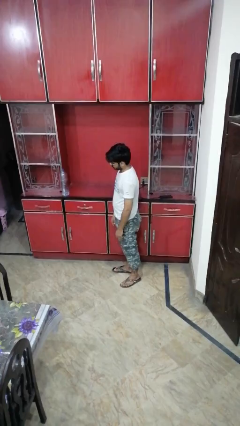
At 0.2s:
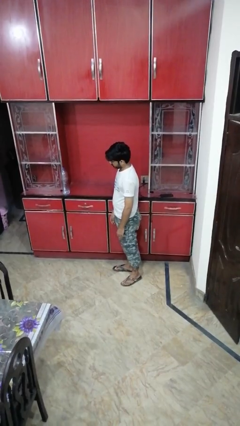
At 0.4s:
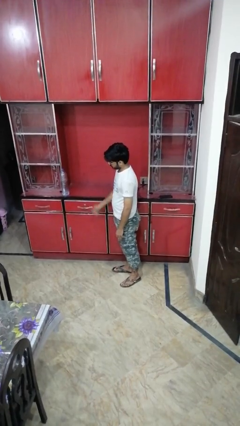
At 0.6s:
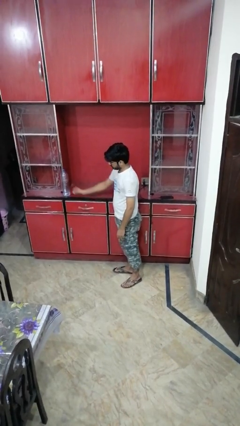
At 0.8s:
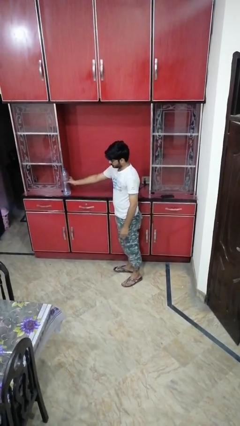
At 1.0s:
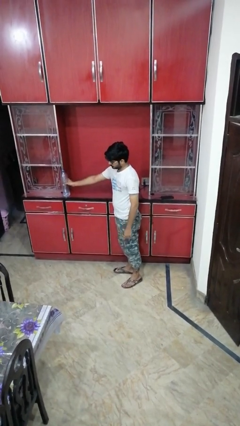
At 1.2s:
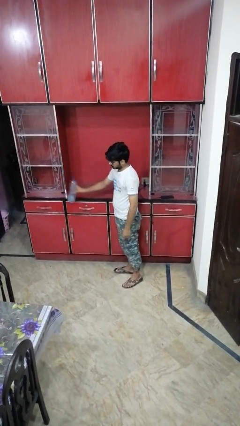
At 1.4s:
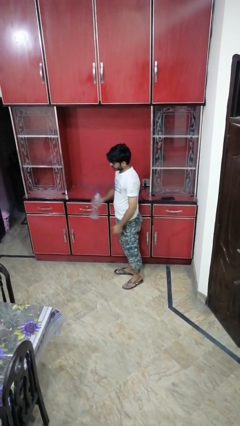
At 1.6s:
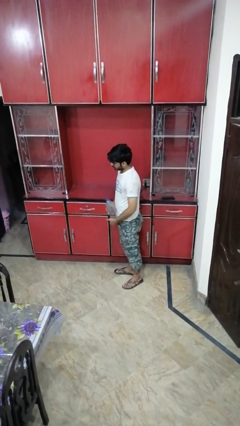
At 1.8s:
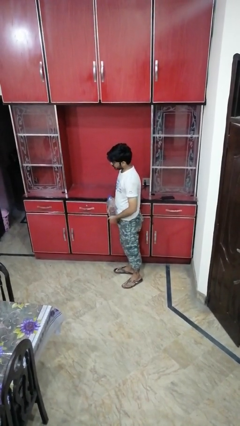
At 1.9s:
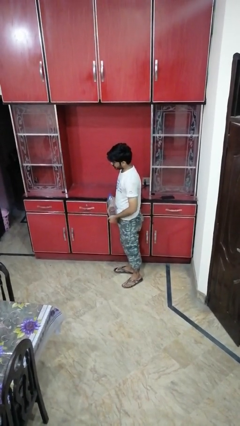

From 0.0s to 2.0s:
person picks up object from countertop

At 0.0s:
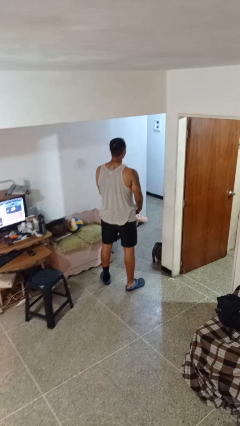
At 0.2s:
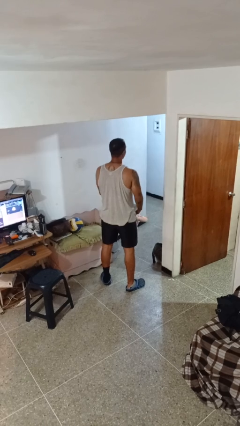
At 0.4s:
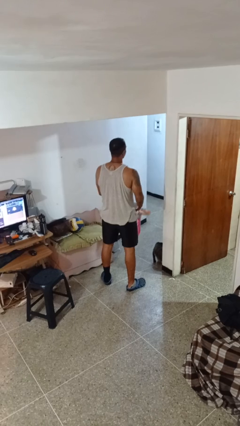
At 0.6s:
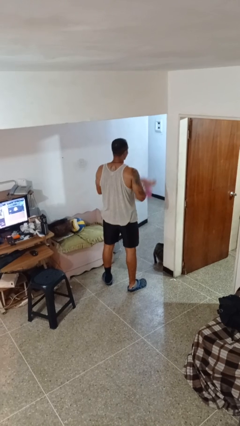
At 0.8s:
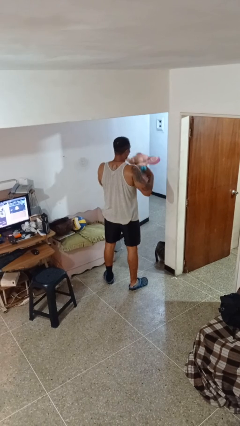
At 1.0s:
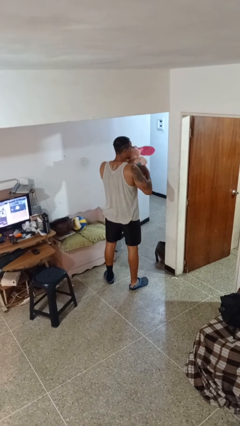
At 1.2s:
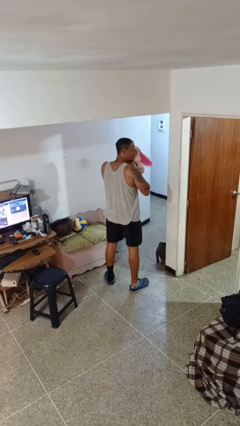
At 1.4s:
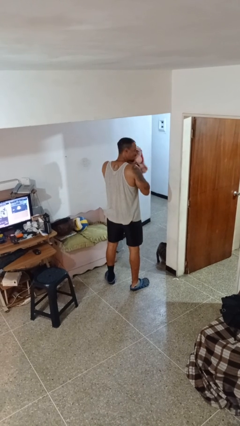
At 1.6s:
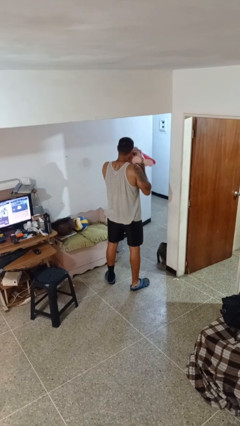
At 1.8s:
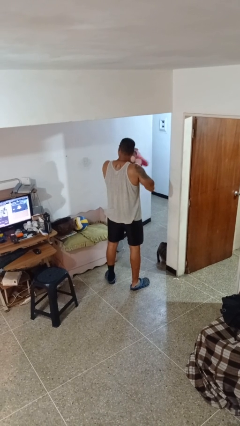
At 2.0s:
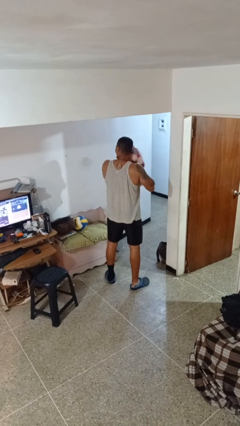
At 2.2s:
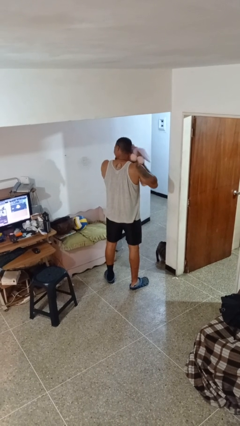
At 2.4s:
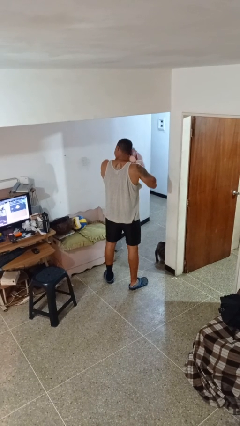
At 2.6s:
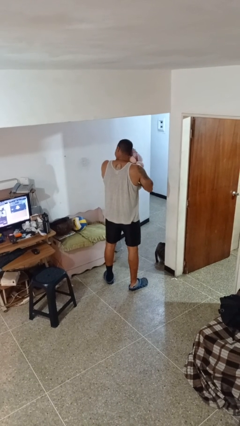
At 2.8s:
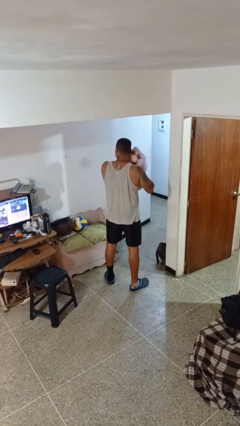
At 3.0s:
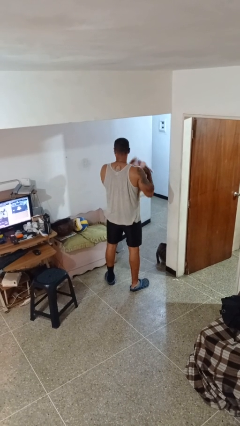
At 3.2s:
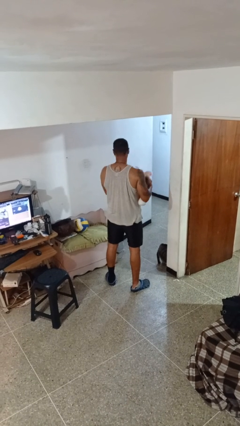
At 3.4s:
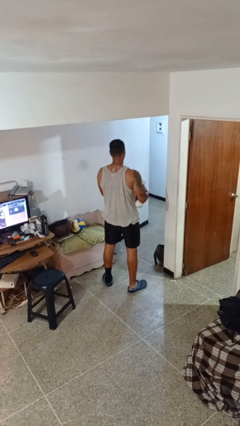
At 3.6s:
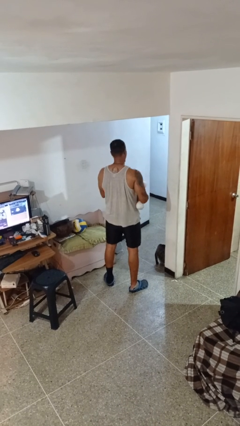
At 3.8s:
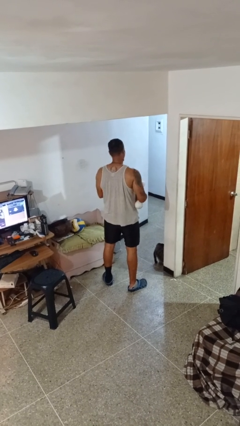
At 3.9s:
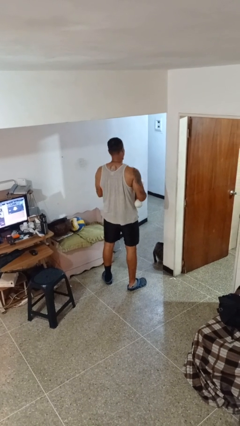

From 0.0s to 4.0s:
person squeezes object

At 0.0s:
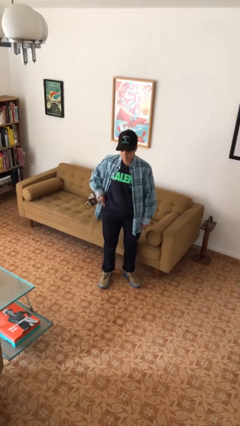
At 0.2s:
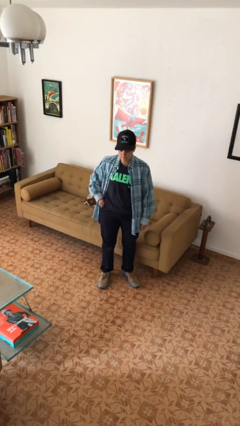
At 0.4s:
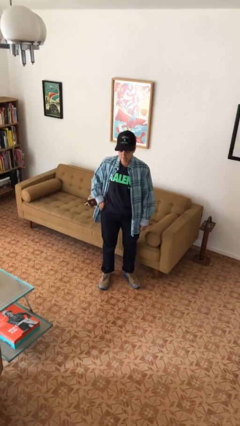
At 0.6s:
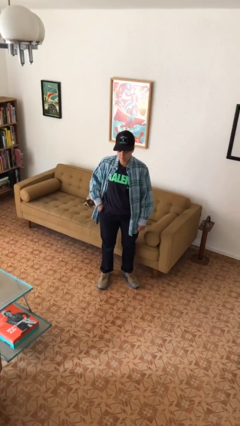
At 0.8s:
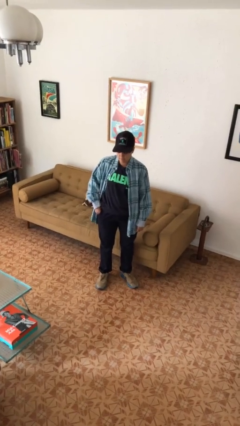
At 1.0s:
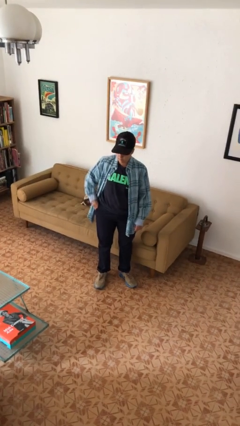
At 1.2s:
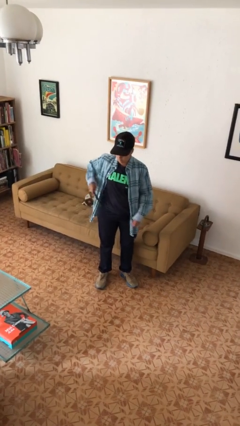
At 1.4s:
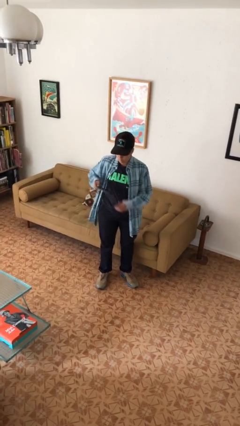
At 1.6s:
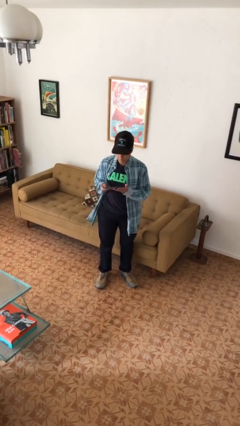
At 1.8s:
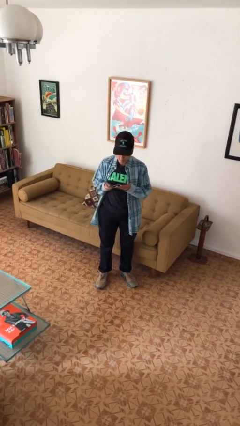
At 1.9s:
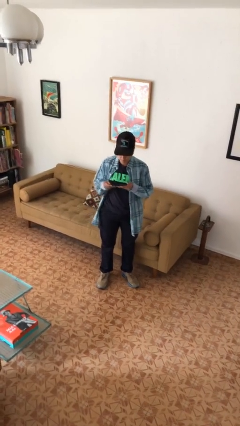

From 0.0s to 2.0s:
person takes phone from pocket

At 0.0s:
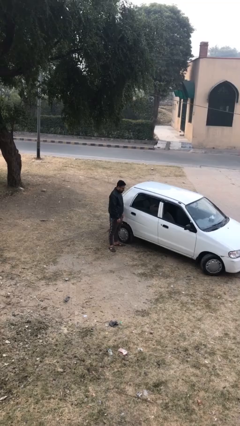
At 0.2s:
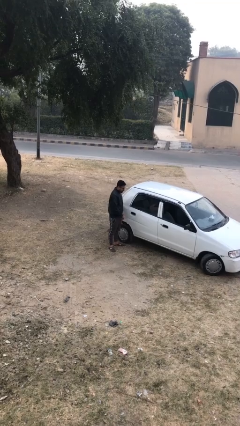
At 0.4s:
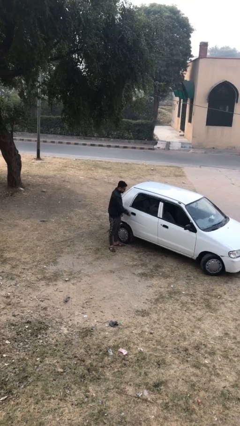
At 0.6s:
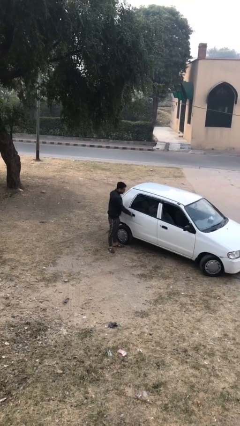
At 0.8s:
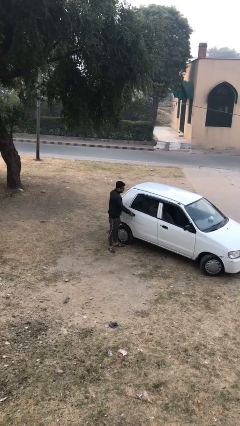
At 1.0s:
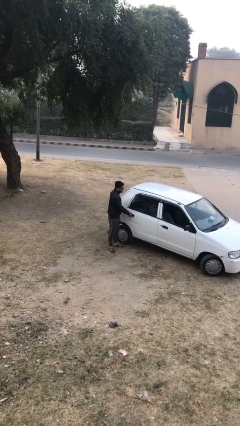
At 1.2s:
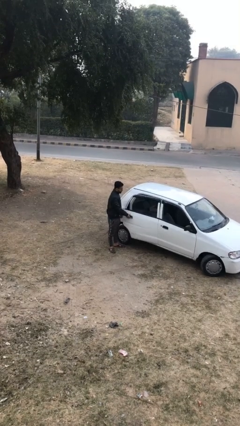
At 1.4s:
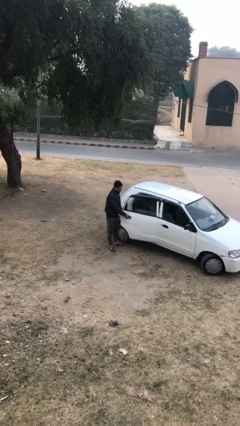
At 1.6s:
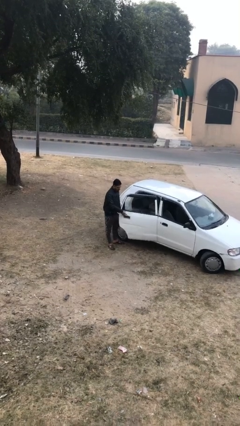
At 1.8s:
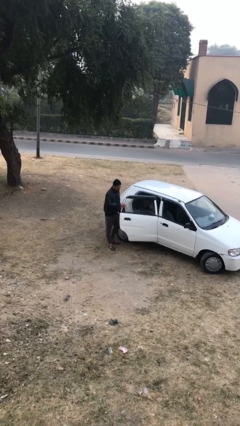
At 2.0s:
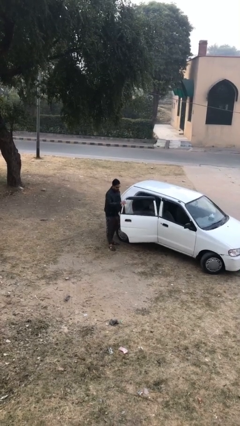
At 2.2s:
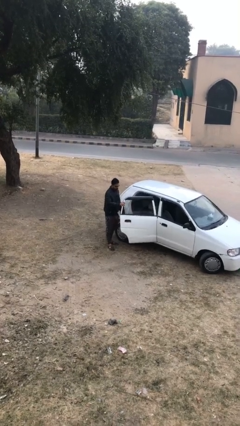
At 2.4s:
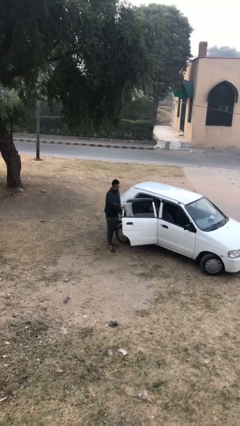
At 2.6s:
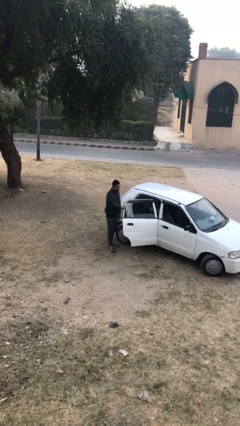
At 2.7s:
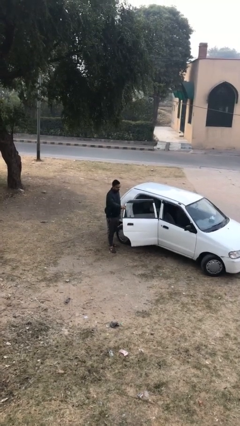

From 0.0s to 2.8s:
person opens car door

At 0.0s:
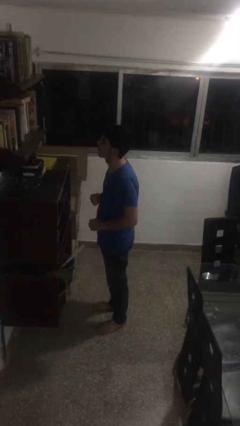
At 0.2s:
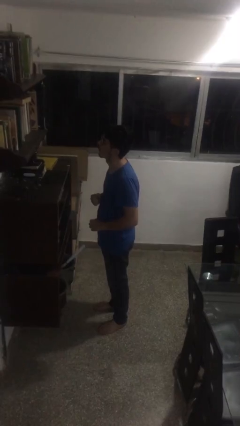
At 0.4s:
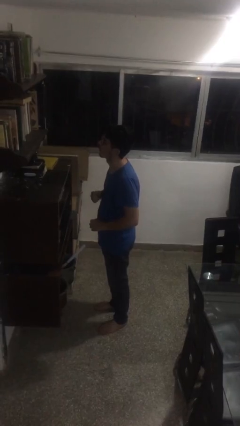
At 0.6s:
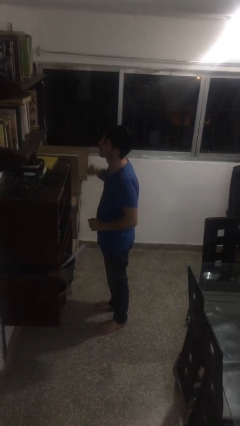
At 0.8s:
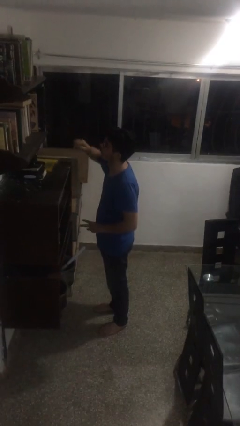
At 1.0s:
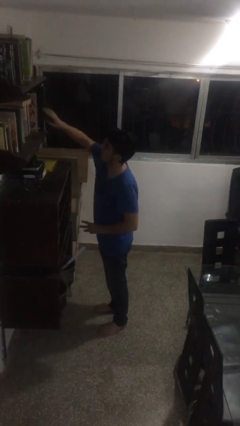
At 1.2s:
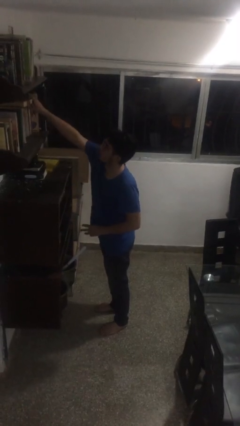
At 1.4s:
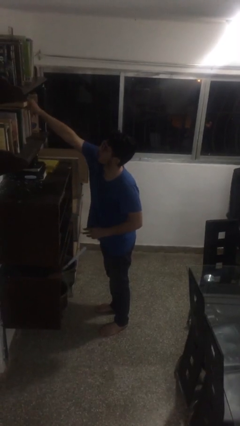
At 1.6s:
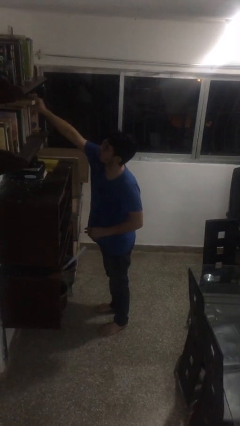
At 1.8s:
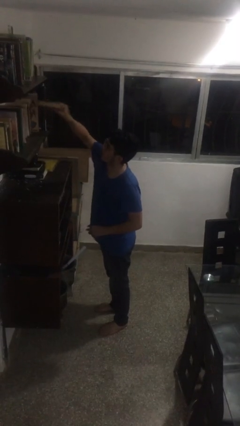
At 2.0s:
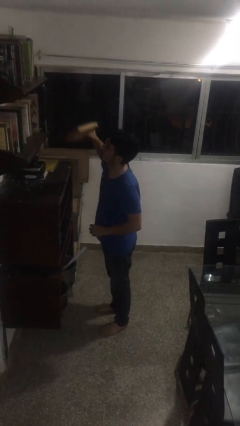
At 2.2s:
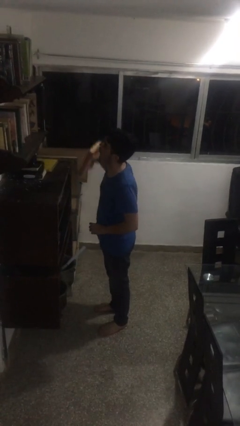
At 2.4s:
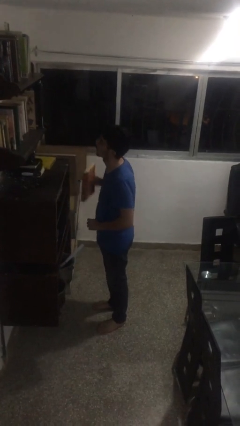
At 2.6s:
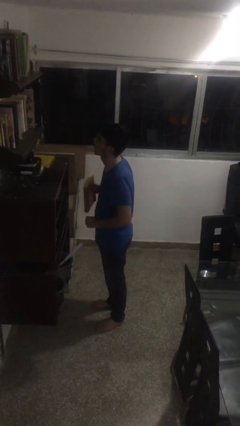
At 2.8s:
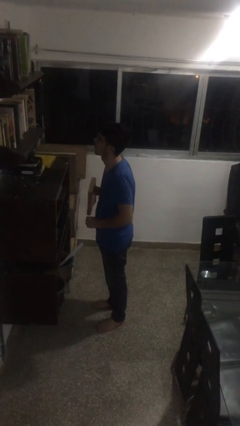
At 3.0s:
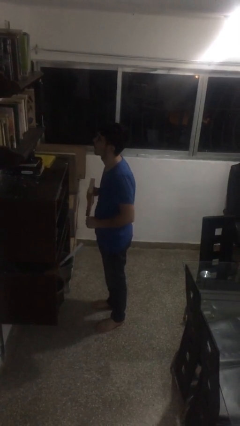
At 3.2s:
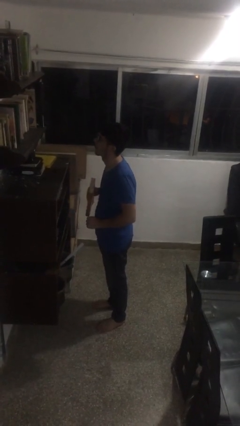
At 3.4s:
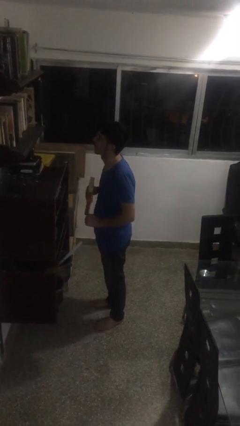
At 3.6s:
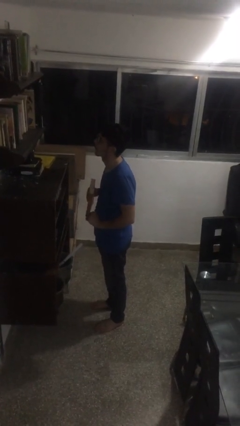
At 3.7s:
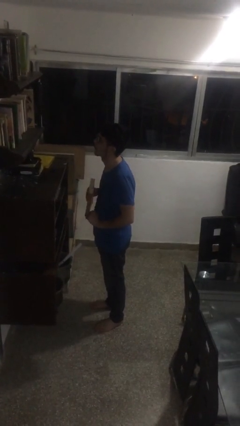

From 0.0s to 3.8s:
person picks up object from shelf

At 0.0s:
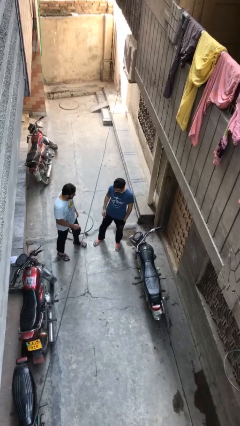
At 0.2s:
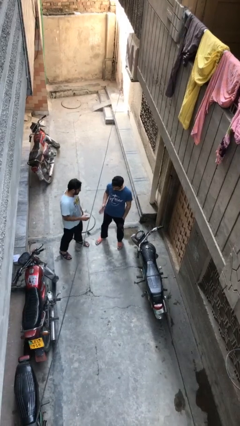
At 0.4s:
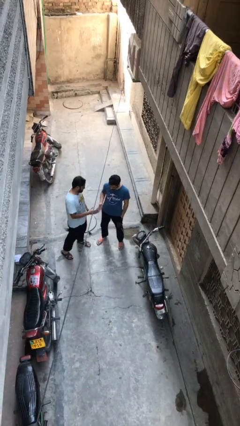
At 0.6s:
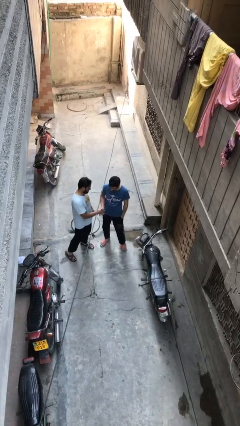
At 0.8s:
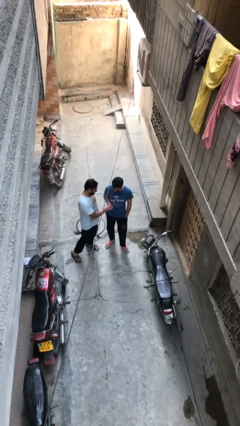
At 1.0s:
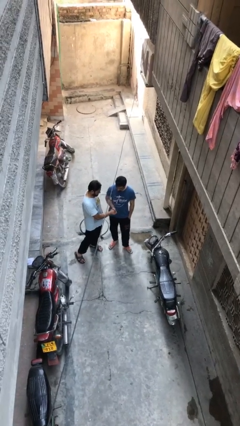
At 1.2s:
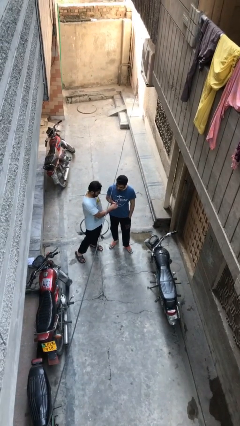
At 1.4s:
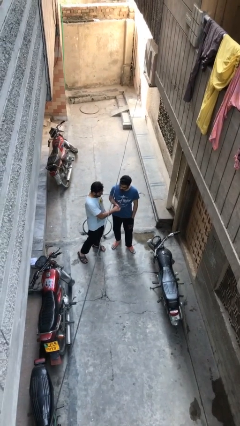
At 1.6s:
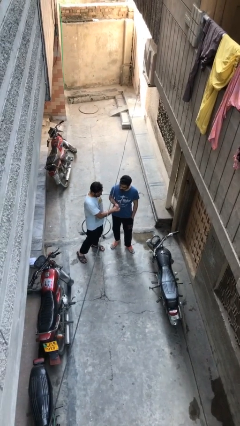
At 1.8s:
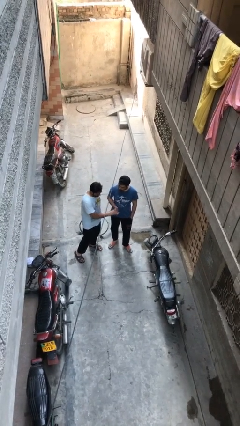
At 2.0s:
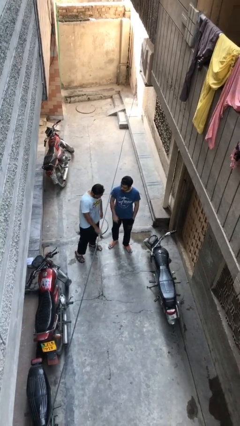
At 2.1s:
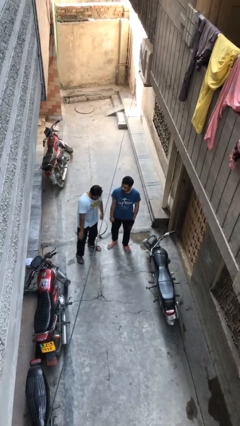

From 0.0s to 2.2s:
person shakes hand

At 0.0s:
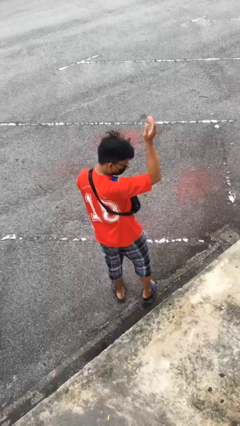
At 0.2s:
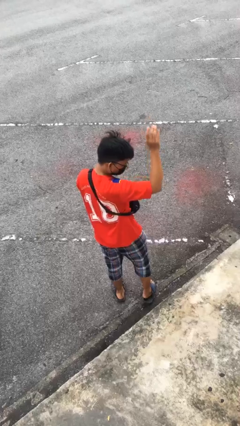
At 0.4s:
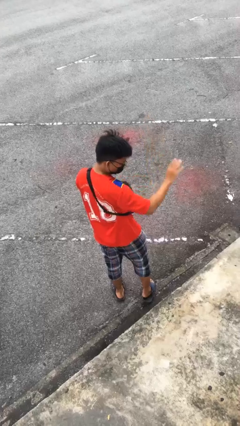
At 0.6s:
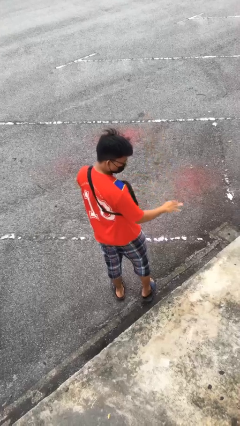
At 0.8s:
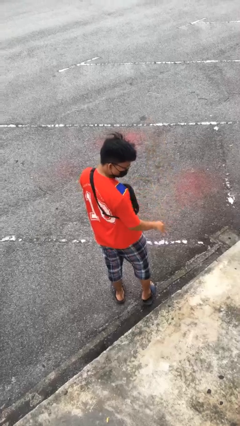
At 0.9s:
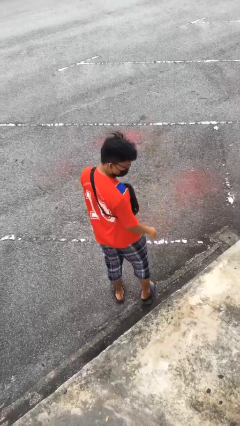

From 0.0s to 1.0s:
person gestures swipe down
